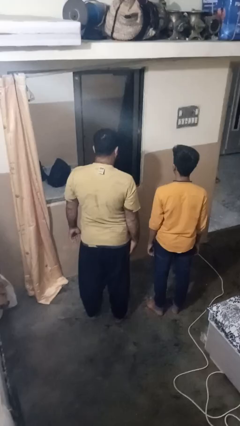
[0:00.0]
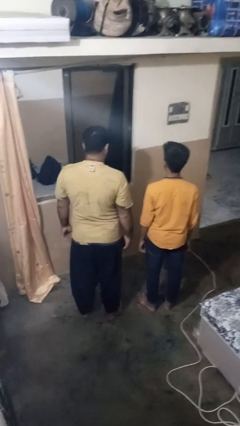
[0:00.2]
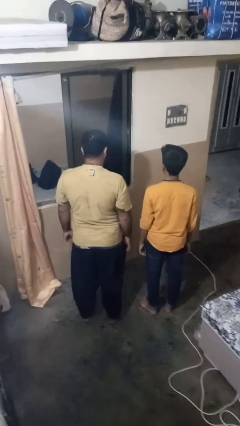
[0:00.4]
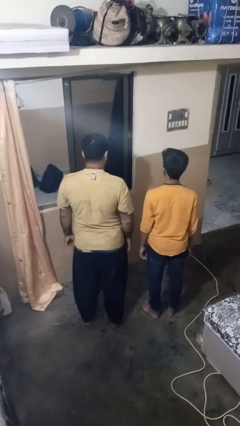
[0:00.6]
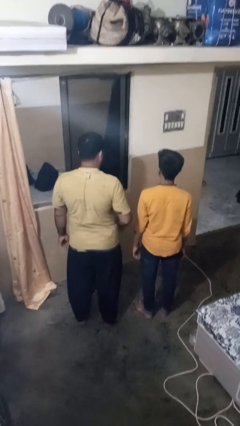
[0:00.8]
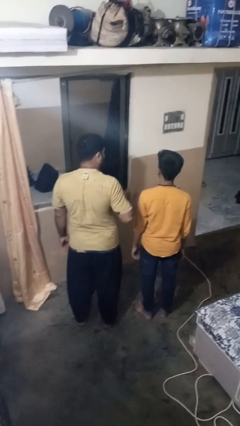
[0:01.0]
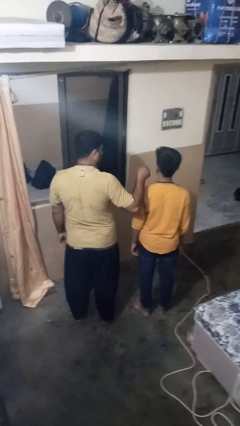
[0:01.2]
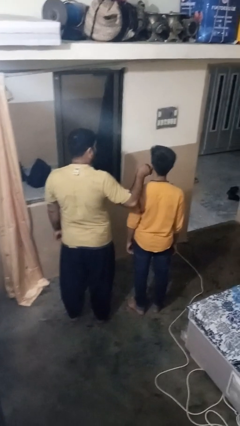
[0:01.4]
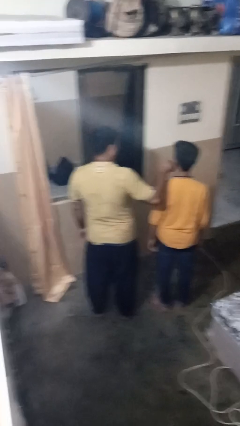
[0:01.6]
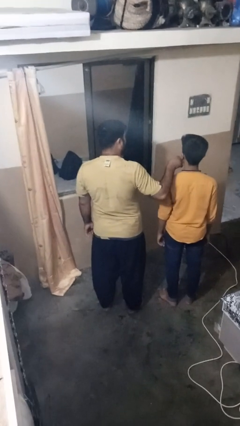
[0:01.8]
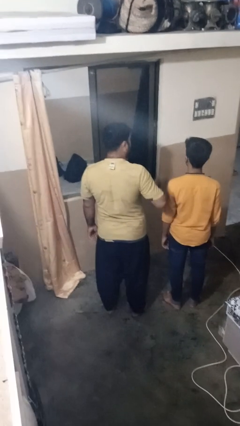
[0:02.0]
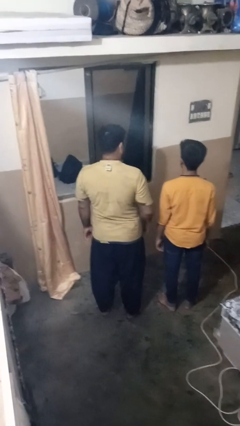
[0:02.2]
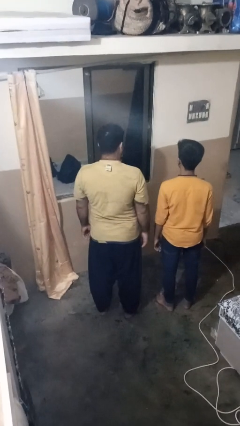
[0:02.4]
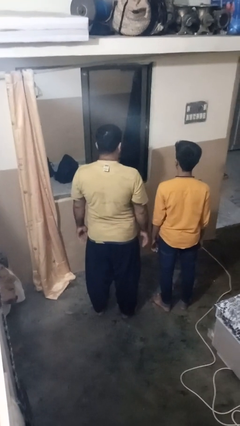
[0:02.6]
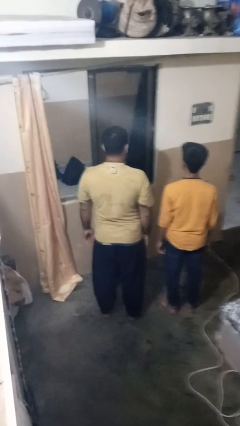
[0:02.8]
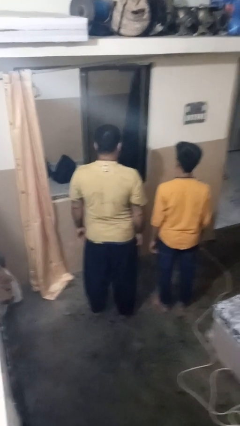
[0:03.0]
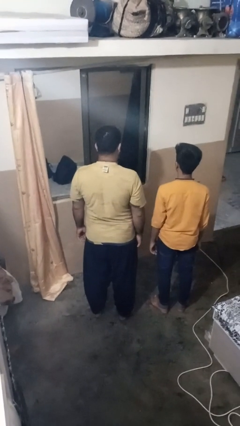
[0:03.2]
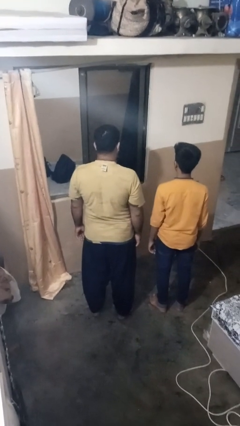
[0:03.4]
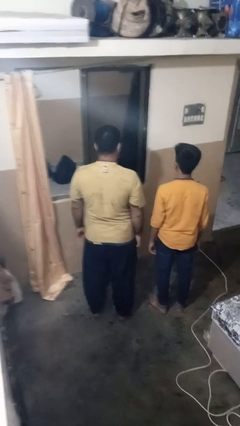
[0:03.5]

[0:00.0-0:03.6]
person touches face of person

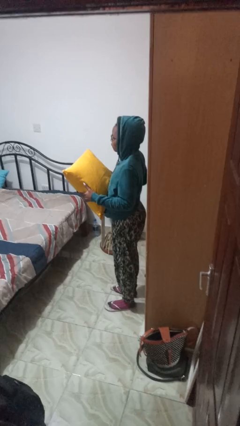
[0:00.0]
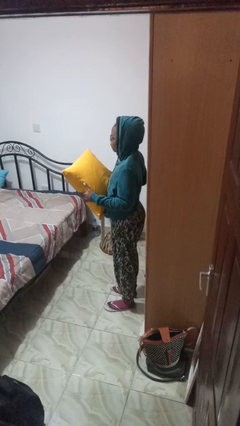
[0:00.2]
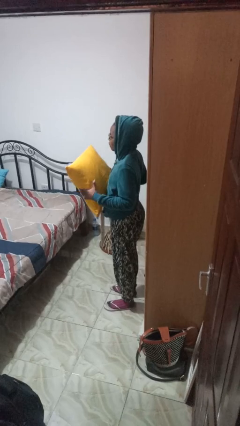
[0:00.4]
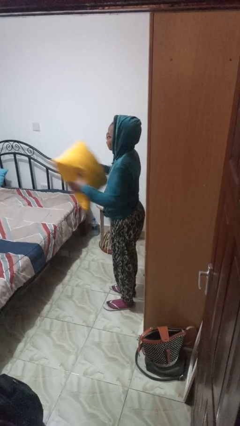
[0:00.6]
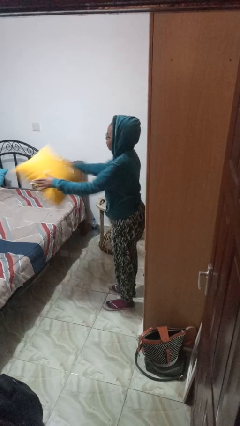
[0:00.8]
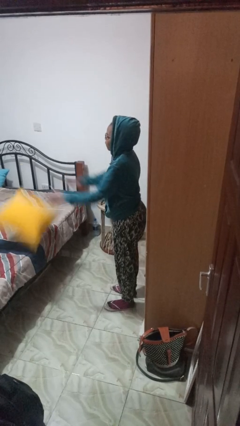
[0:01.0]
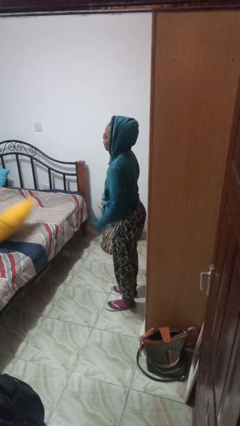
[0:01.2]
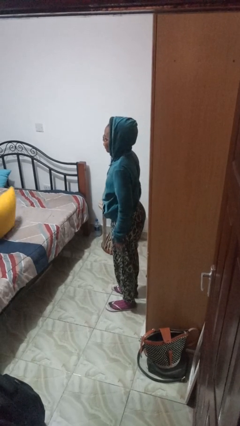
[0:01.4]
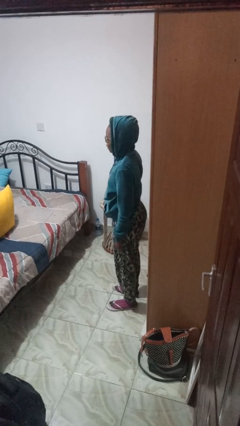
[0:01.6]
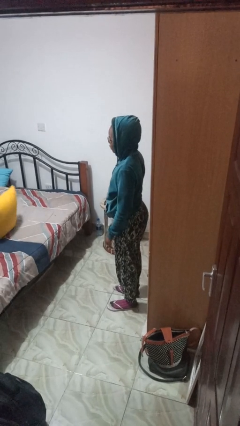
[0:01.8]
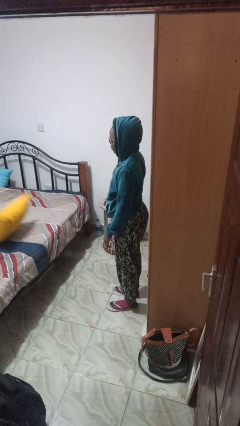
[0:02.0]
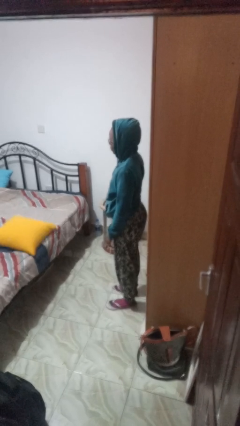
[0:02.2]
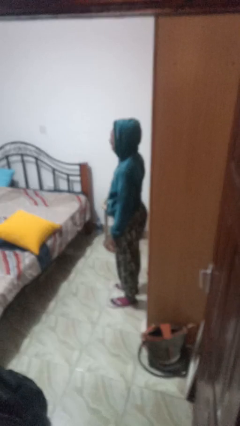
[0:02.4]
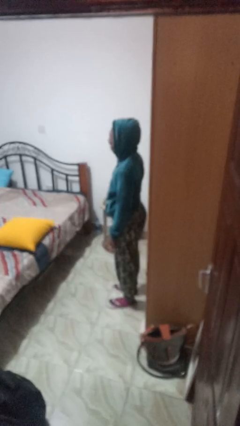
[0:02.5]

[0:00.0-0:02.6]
person throws object on bed

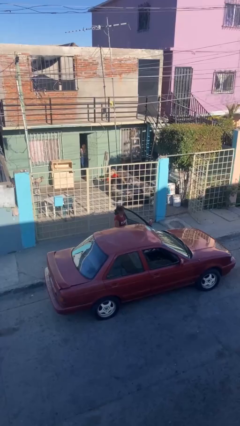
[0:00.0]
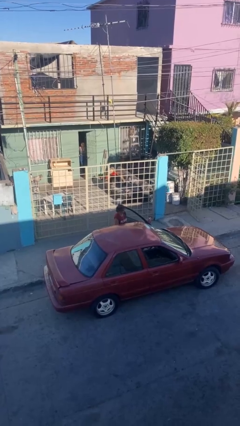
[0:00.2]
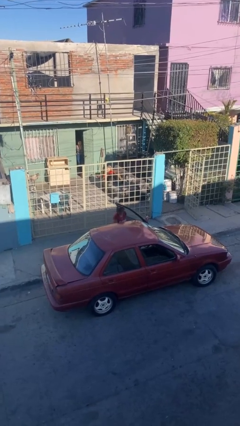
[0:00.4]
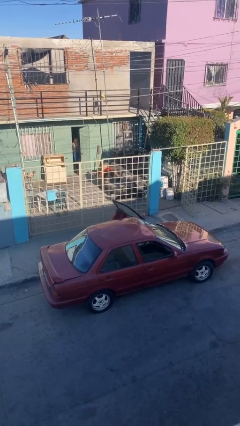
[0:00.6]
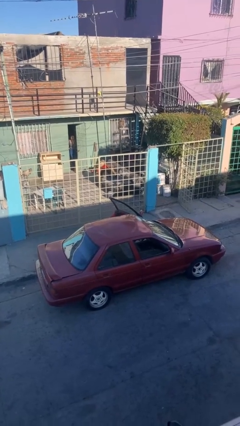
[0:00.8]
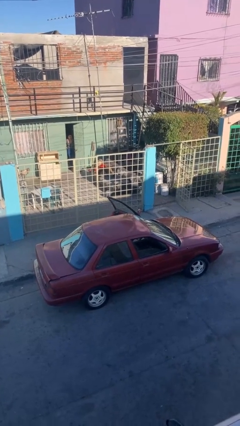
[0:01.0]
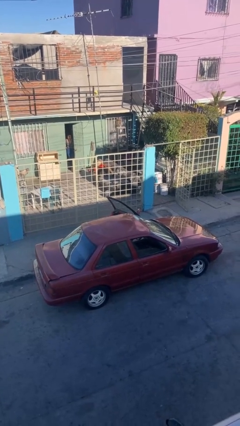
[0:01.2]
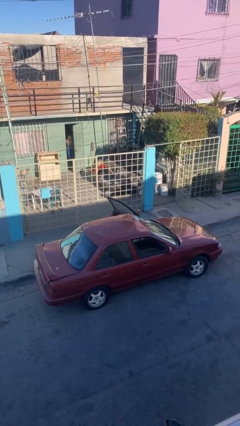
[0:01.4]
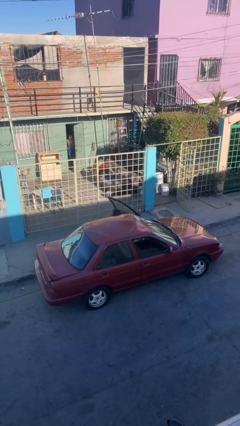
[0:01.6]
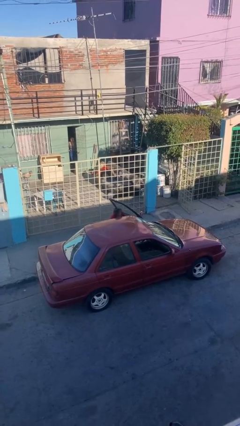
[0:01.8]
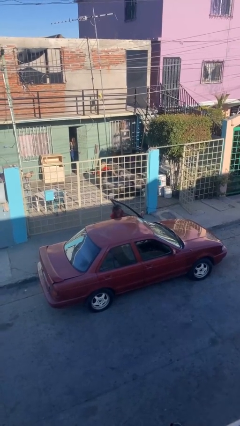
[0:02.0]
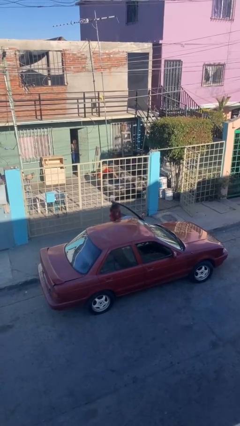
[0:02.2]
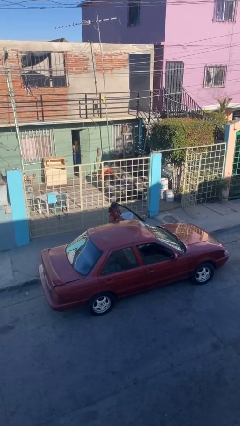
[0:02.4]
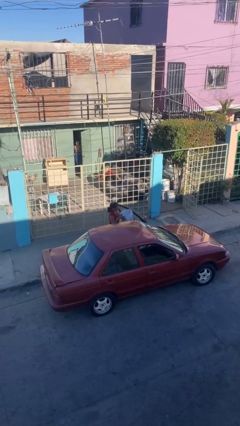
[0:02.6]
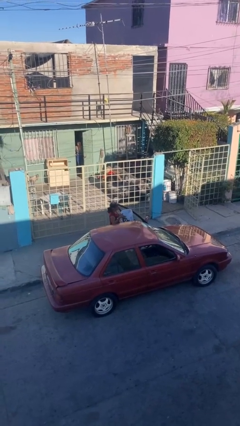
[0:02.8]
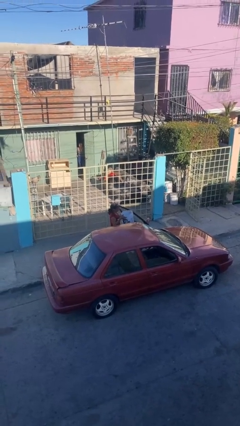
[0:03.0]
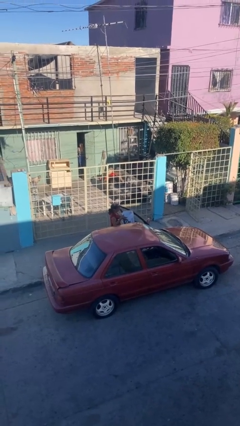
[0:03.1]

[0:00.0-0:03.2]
person unloads car

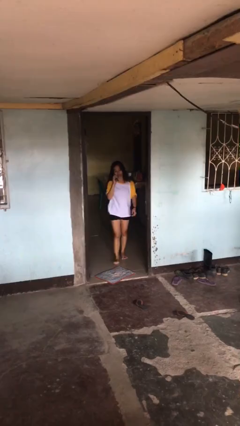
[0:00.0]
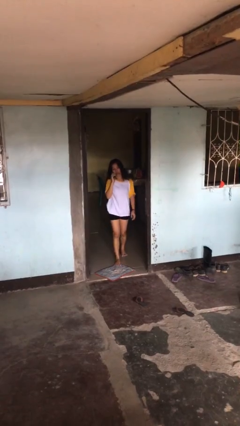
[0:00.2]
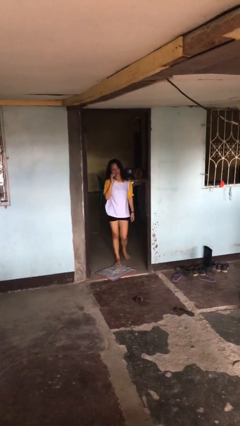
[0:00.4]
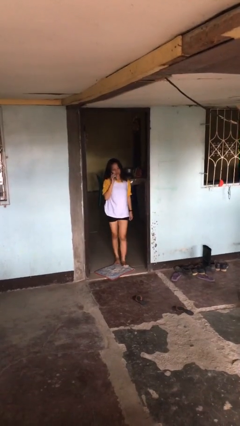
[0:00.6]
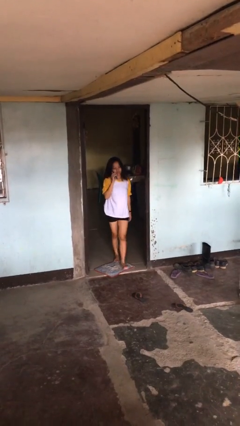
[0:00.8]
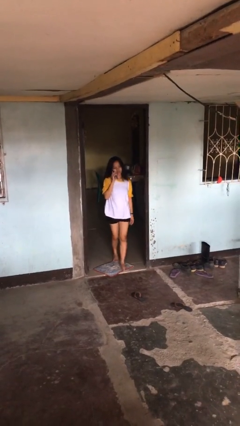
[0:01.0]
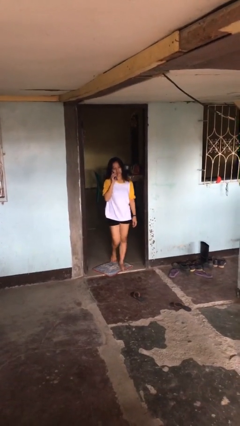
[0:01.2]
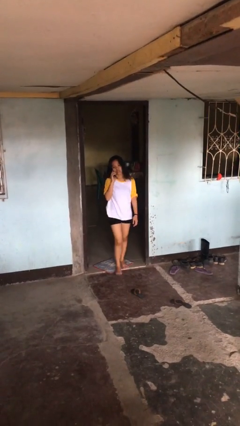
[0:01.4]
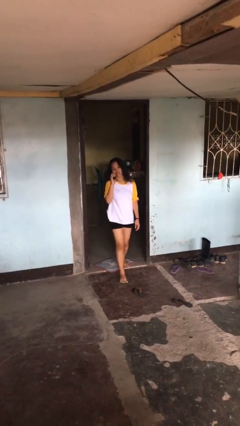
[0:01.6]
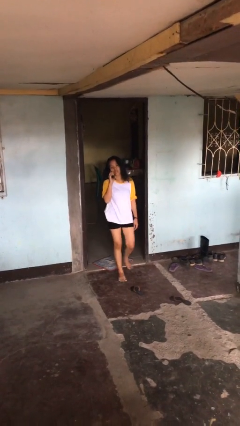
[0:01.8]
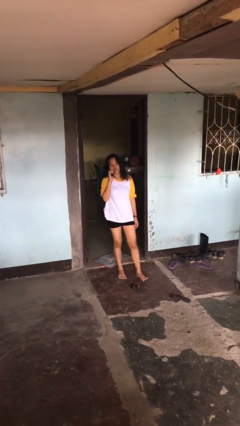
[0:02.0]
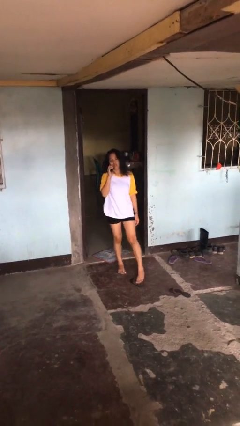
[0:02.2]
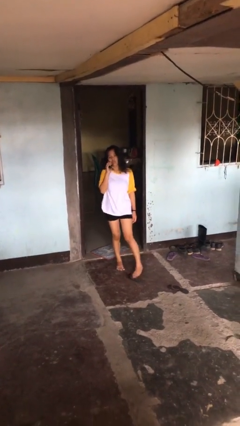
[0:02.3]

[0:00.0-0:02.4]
person enters scene through structure

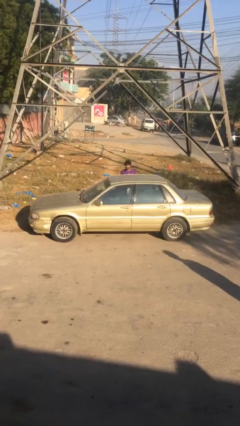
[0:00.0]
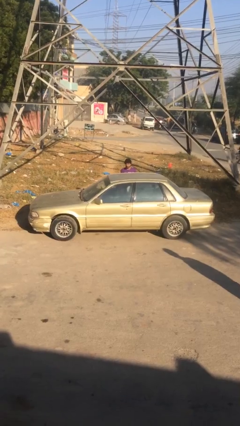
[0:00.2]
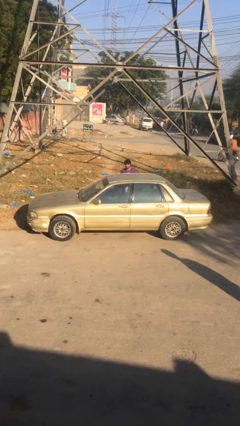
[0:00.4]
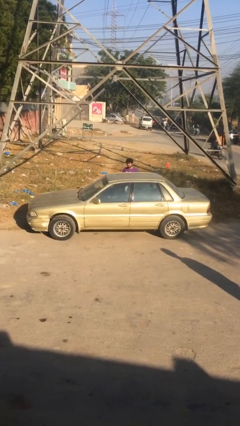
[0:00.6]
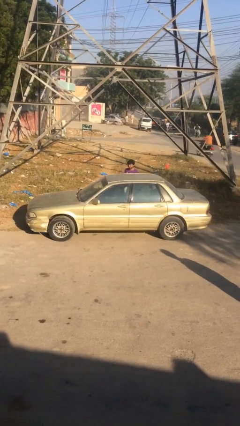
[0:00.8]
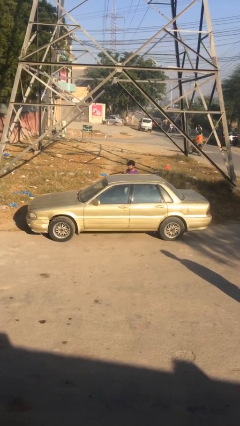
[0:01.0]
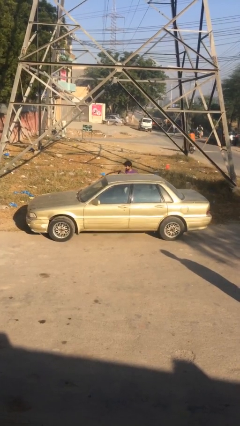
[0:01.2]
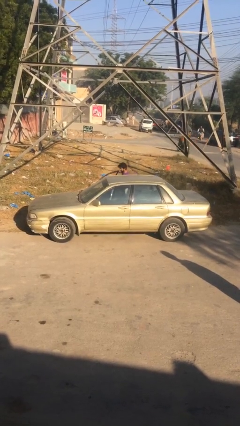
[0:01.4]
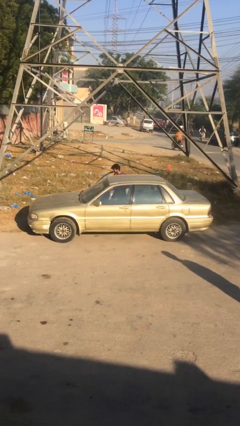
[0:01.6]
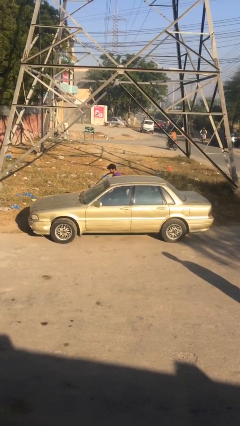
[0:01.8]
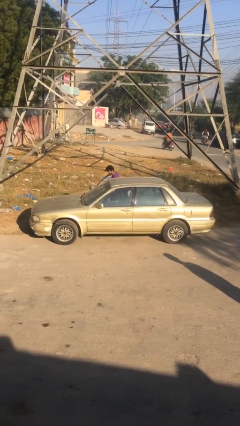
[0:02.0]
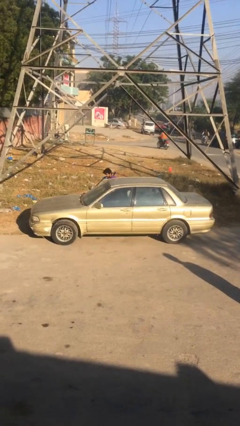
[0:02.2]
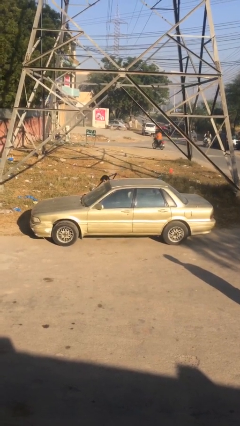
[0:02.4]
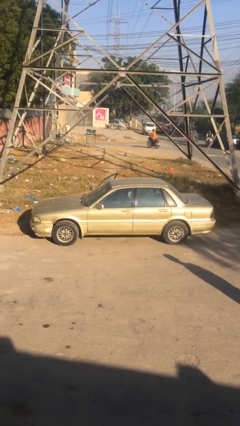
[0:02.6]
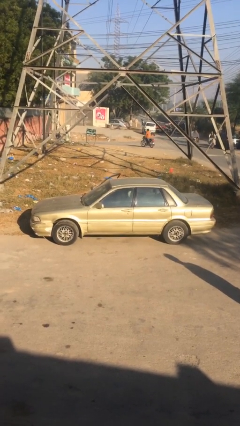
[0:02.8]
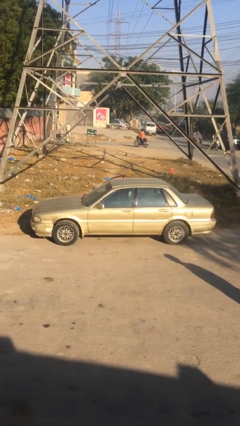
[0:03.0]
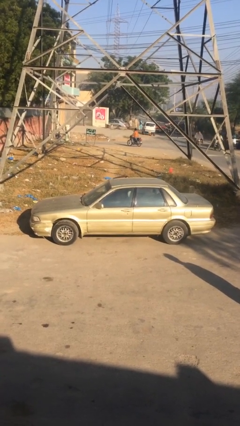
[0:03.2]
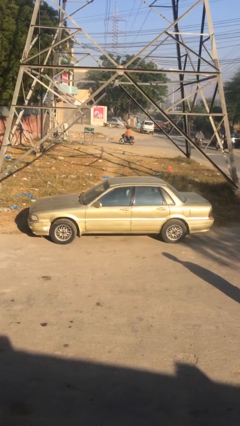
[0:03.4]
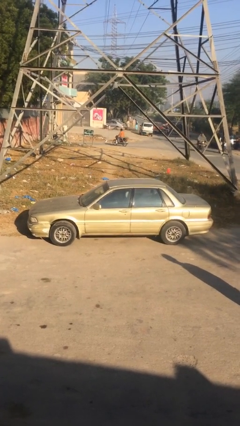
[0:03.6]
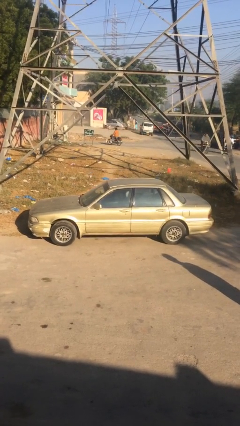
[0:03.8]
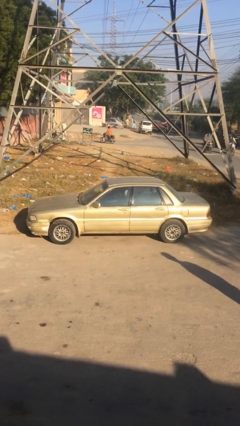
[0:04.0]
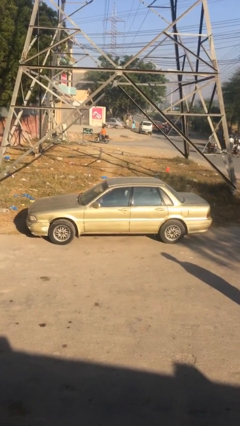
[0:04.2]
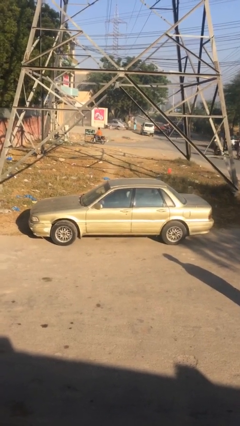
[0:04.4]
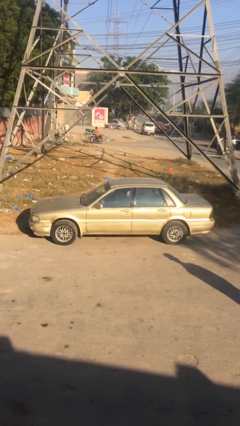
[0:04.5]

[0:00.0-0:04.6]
car picks up person

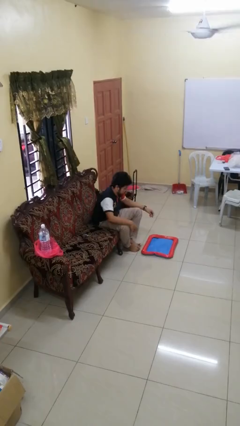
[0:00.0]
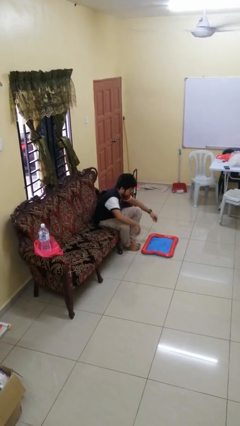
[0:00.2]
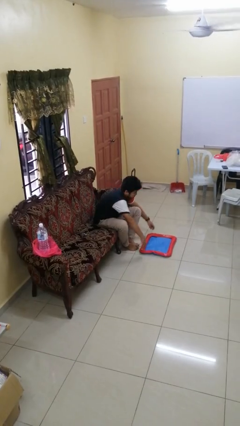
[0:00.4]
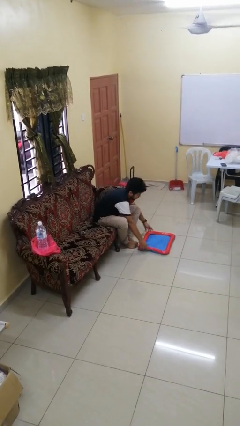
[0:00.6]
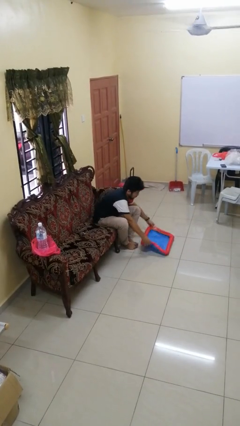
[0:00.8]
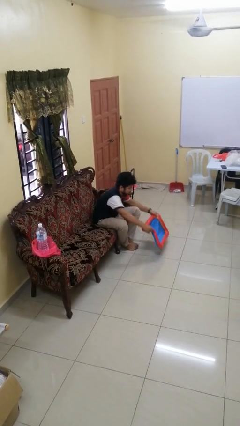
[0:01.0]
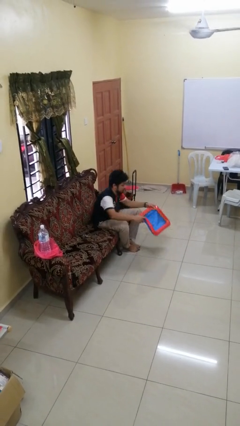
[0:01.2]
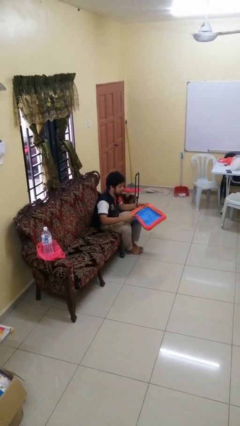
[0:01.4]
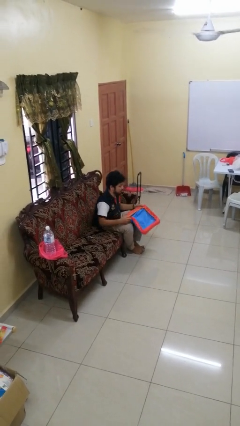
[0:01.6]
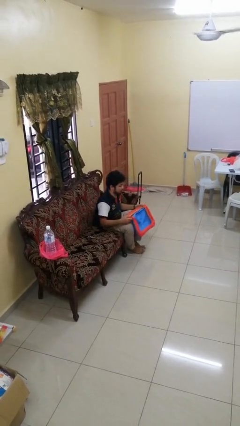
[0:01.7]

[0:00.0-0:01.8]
person picks up object from floor
